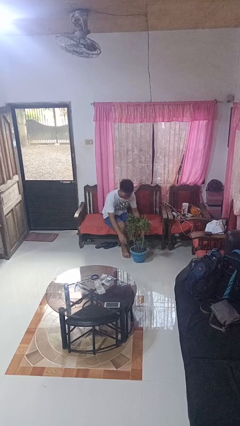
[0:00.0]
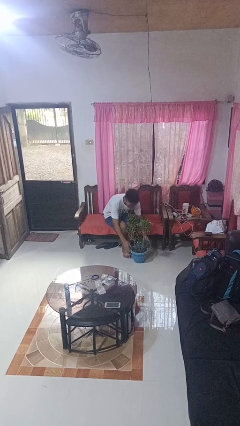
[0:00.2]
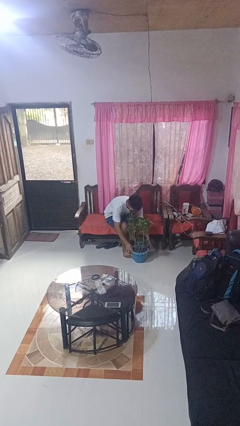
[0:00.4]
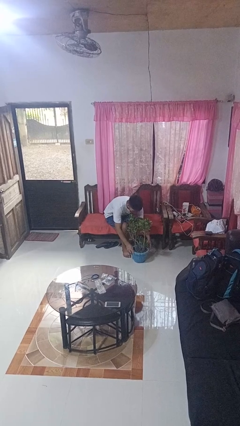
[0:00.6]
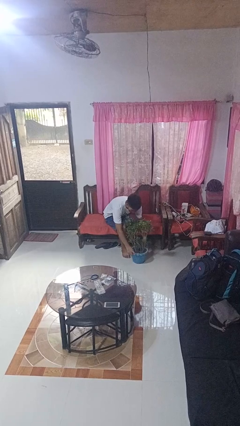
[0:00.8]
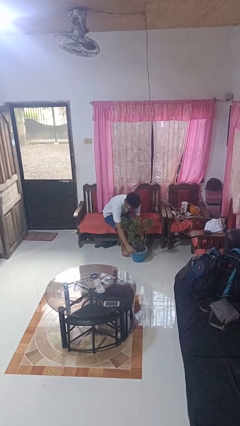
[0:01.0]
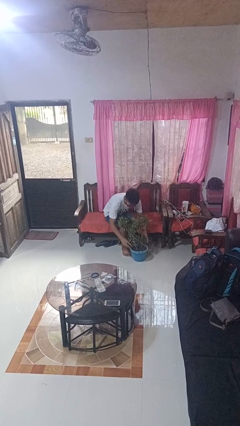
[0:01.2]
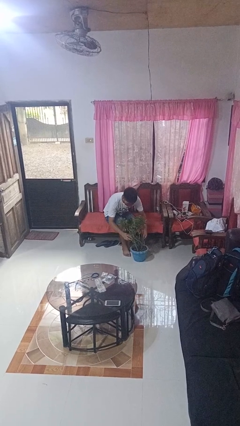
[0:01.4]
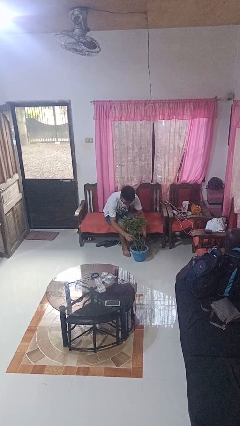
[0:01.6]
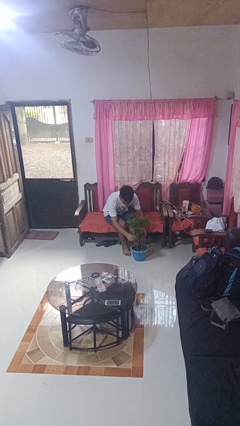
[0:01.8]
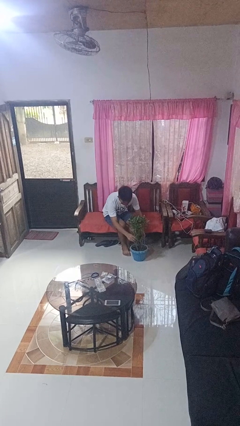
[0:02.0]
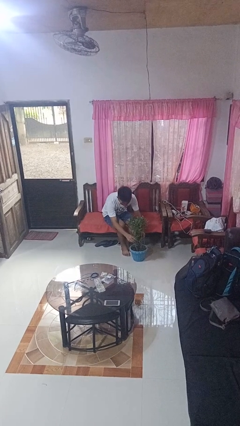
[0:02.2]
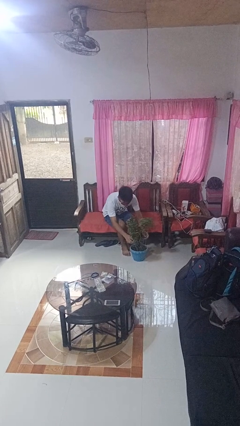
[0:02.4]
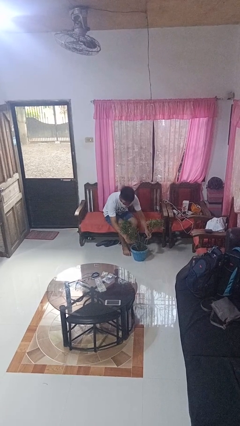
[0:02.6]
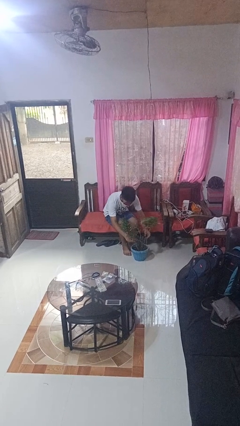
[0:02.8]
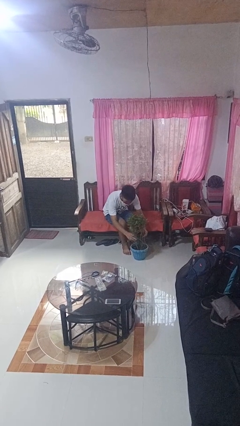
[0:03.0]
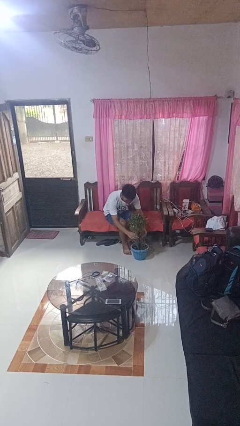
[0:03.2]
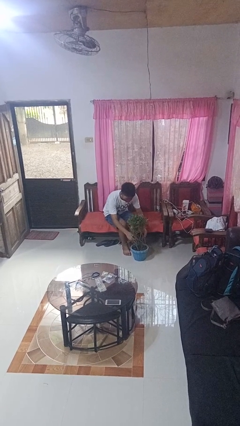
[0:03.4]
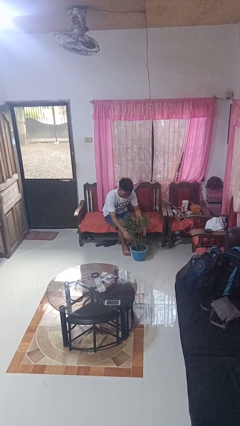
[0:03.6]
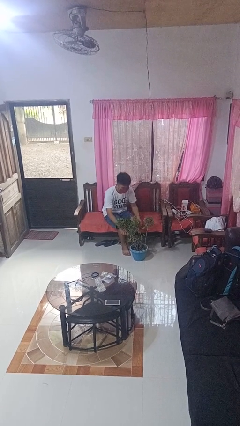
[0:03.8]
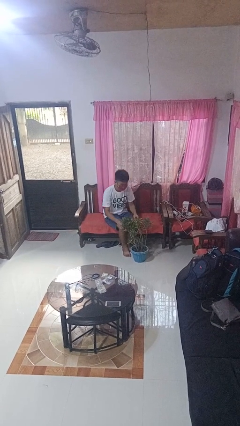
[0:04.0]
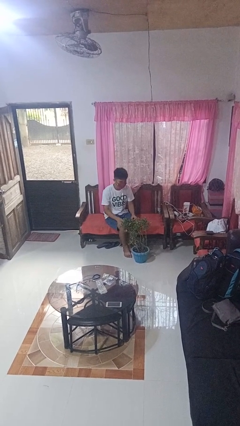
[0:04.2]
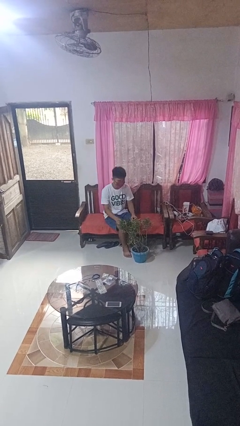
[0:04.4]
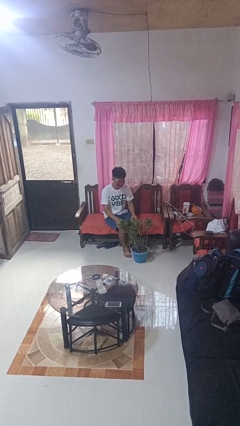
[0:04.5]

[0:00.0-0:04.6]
person arranges flowers in vase

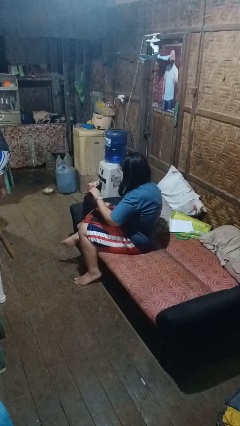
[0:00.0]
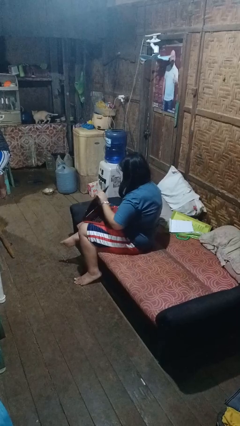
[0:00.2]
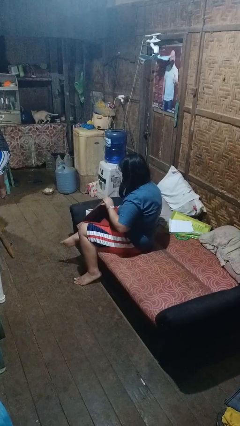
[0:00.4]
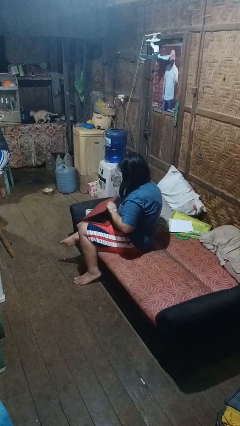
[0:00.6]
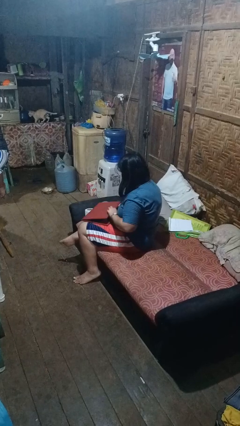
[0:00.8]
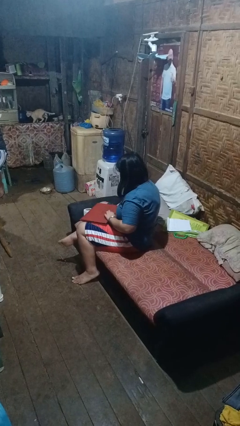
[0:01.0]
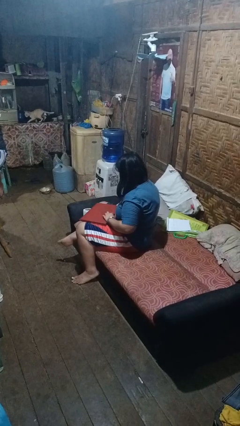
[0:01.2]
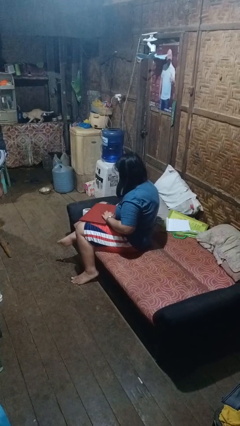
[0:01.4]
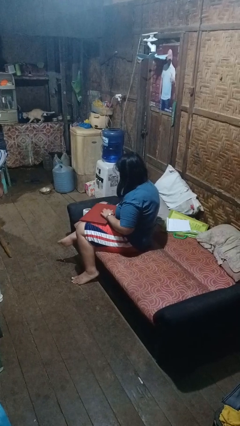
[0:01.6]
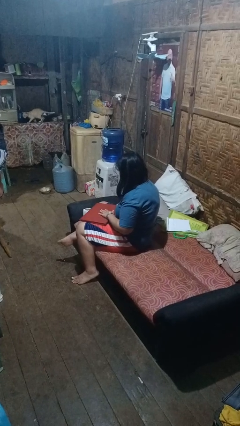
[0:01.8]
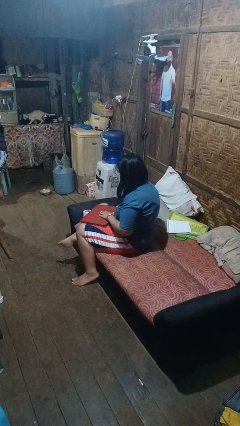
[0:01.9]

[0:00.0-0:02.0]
person closes laptop

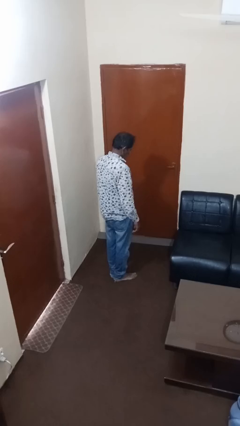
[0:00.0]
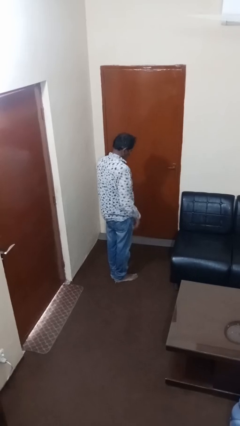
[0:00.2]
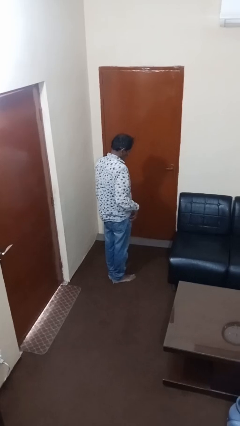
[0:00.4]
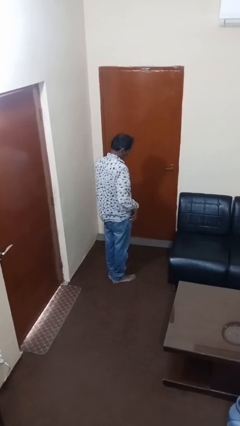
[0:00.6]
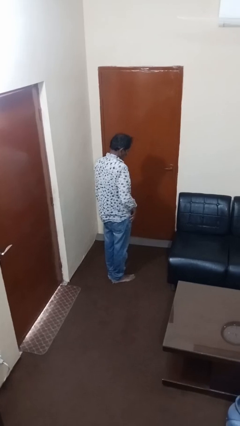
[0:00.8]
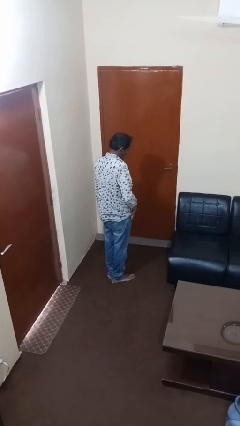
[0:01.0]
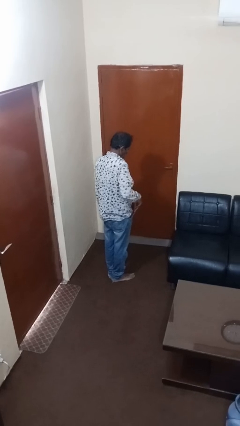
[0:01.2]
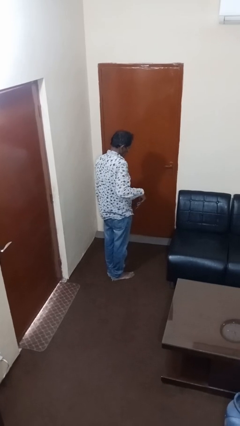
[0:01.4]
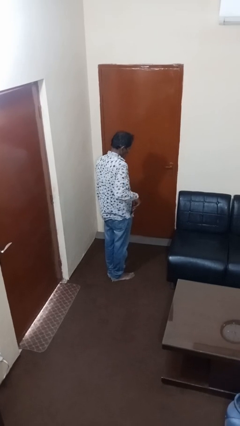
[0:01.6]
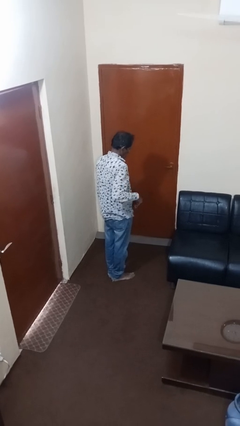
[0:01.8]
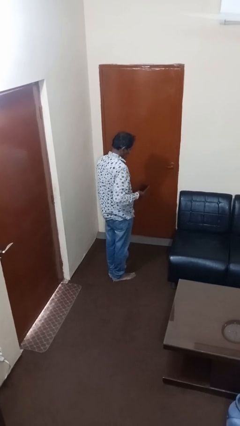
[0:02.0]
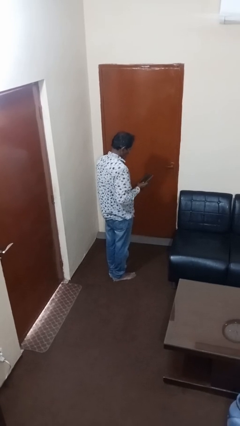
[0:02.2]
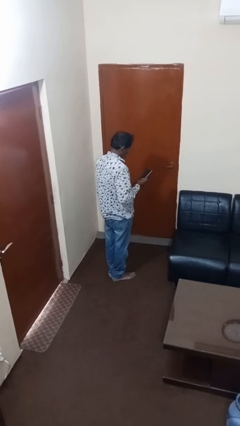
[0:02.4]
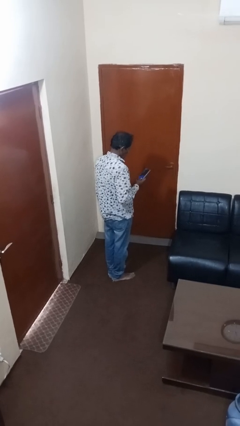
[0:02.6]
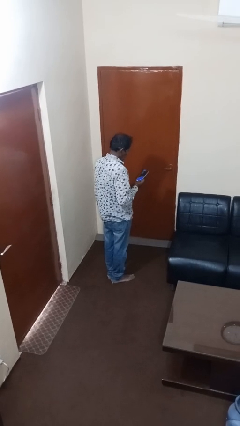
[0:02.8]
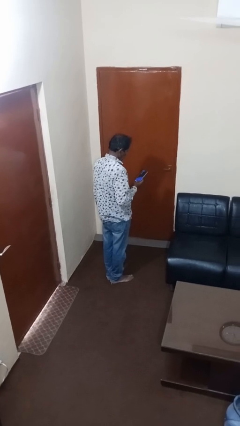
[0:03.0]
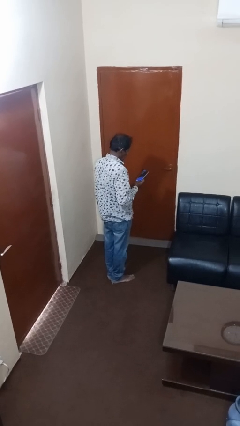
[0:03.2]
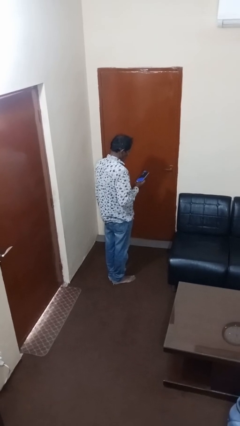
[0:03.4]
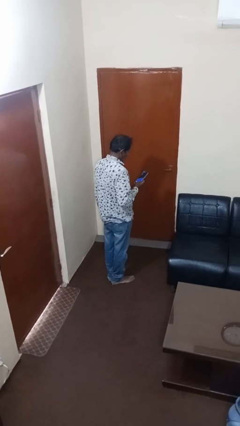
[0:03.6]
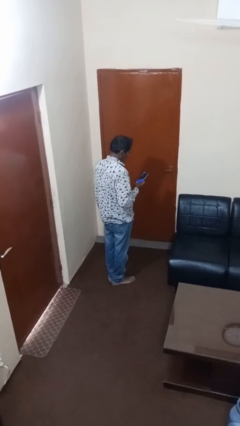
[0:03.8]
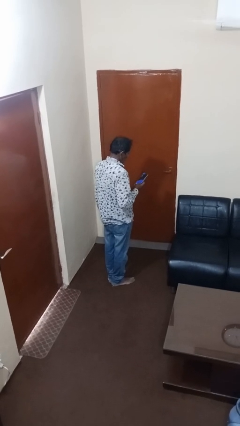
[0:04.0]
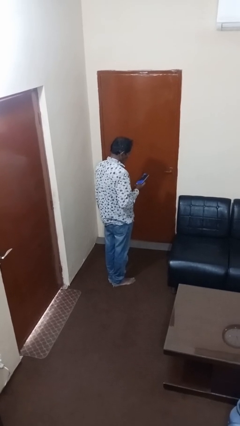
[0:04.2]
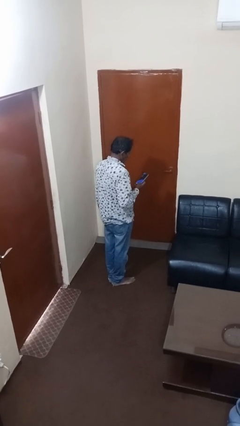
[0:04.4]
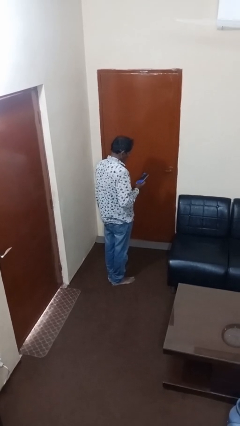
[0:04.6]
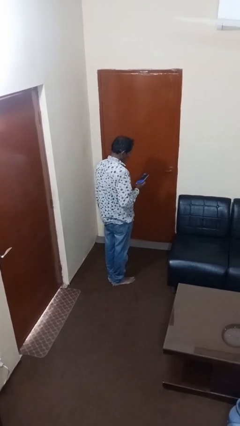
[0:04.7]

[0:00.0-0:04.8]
person takes phone from pocket

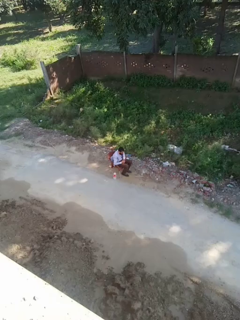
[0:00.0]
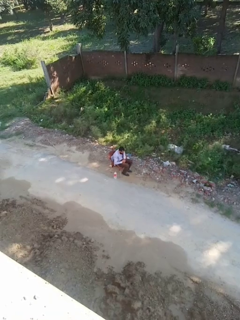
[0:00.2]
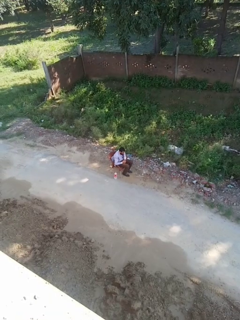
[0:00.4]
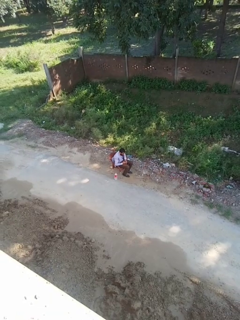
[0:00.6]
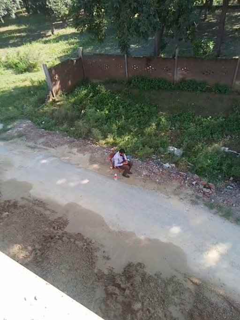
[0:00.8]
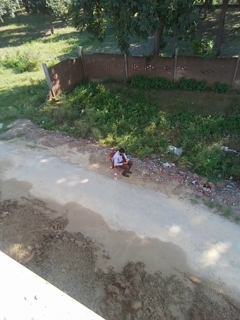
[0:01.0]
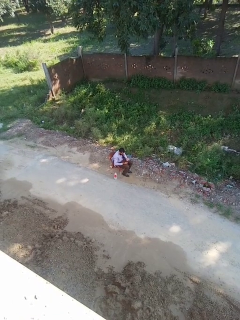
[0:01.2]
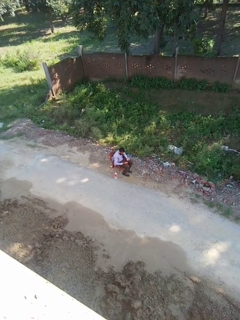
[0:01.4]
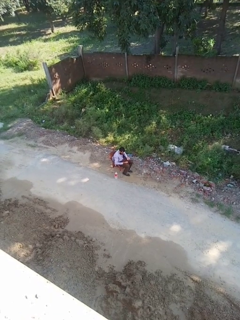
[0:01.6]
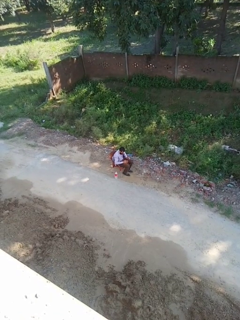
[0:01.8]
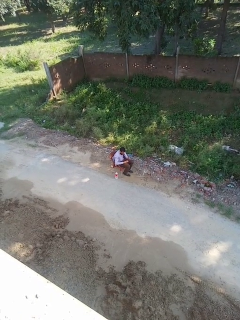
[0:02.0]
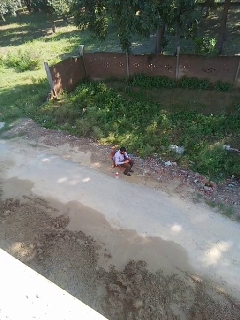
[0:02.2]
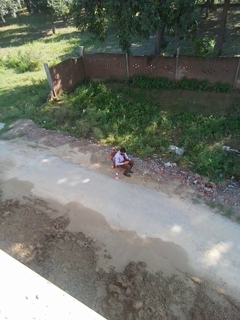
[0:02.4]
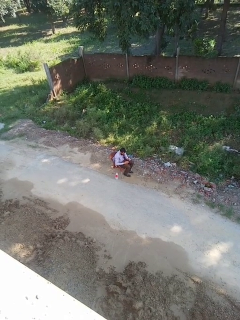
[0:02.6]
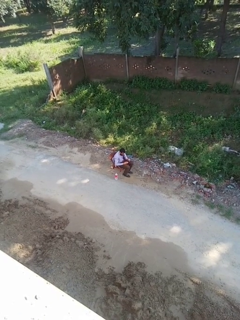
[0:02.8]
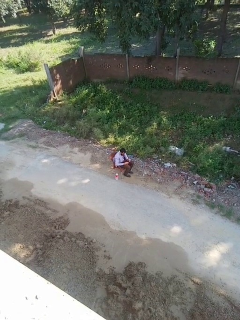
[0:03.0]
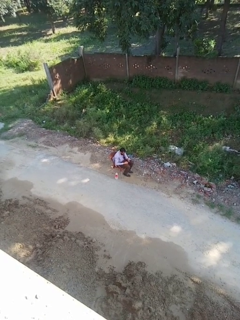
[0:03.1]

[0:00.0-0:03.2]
person looks at hands in lap

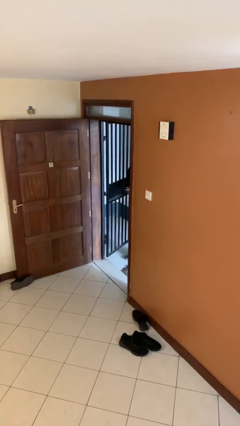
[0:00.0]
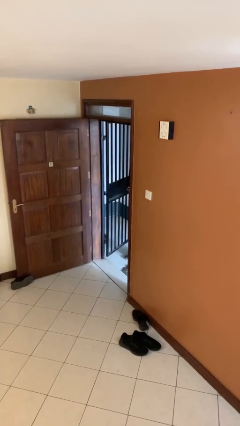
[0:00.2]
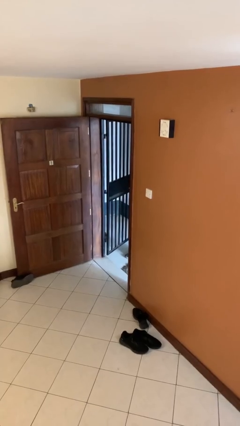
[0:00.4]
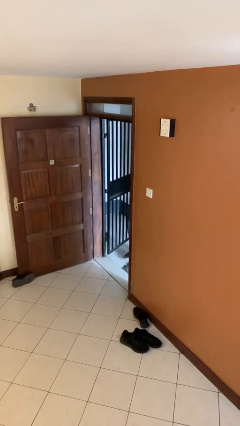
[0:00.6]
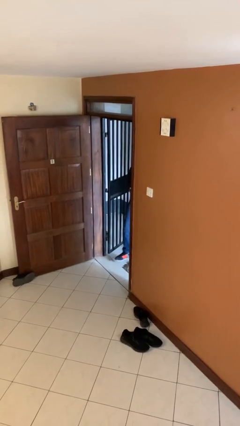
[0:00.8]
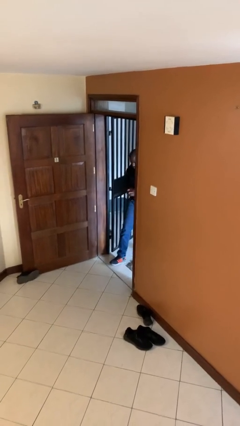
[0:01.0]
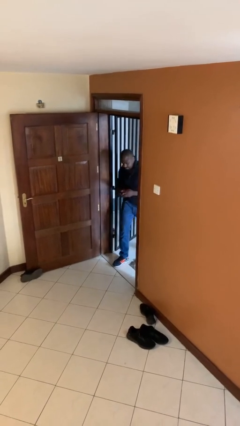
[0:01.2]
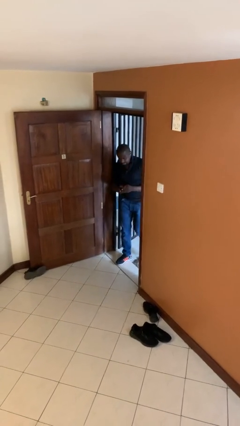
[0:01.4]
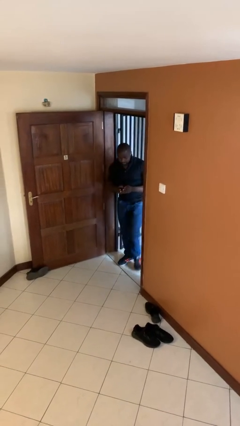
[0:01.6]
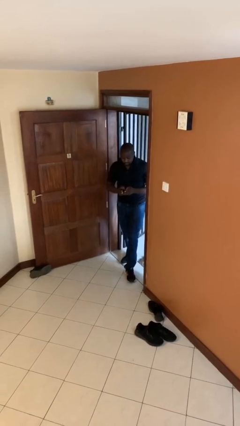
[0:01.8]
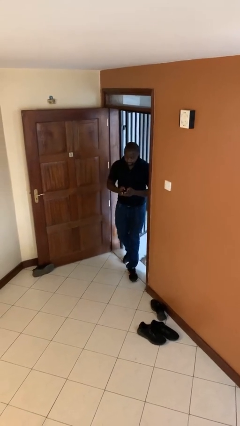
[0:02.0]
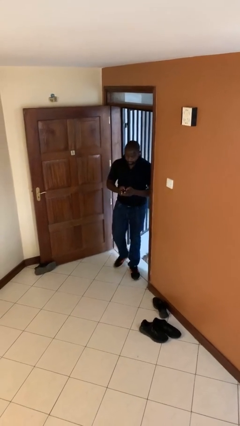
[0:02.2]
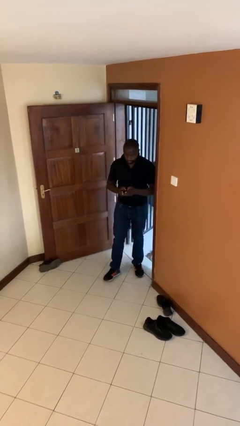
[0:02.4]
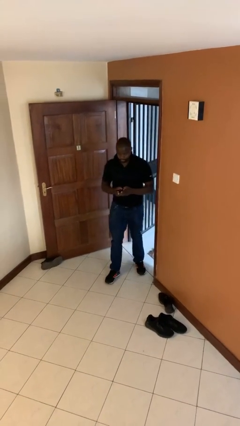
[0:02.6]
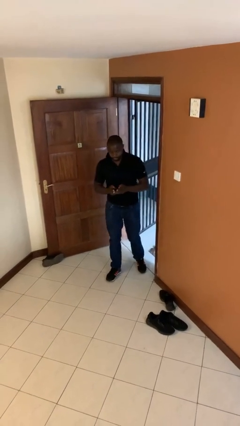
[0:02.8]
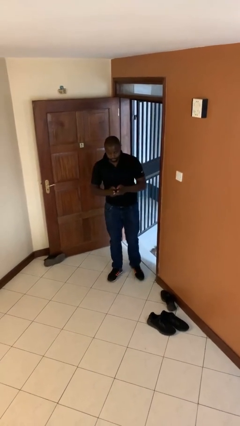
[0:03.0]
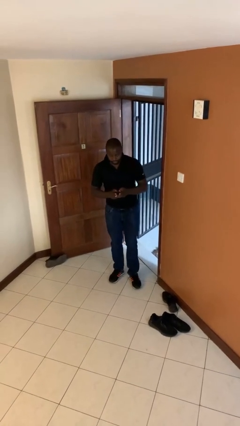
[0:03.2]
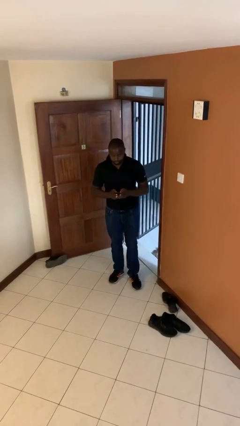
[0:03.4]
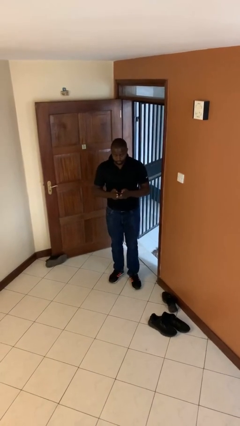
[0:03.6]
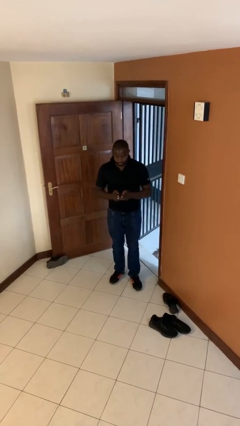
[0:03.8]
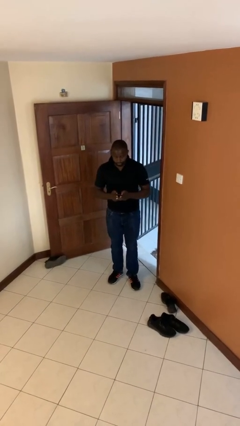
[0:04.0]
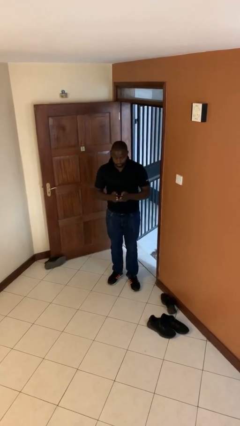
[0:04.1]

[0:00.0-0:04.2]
person enters scene through structure
